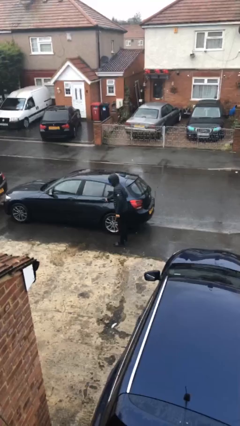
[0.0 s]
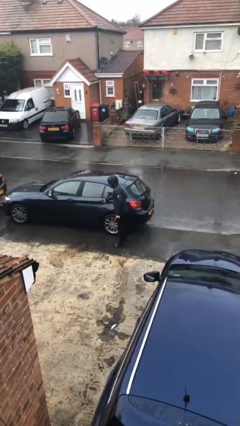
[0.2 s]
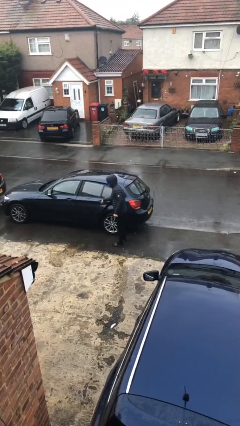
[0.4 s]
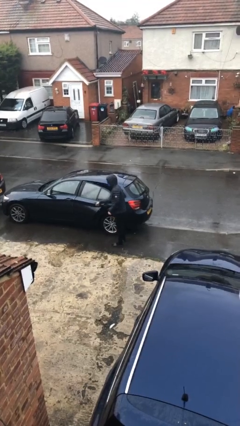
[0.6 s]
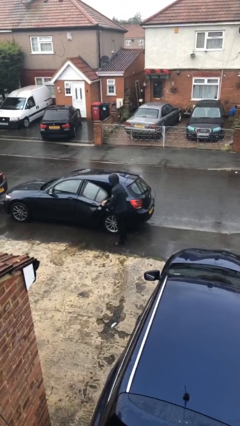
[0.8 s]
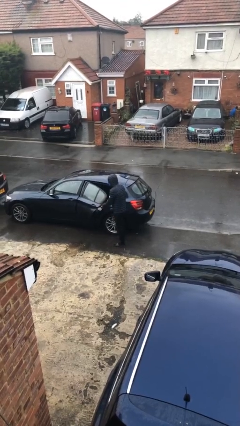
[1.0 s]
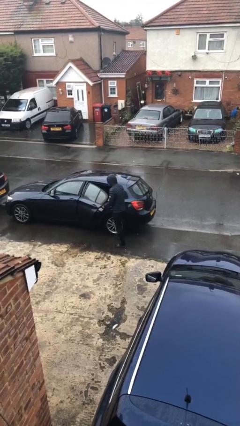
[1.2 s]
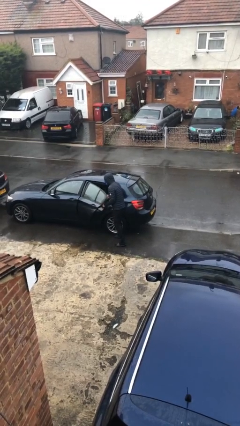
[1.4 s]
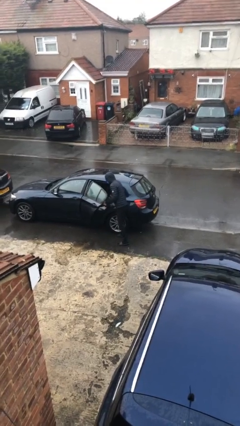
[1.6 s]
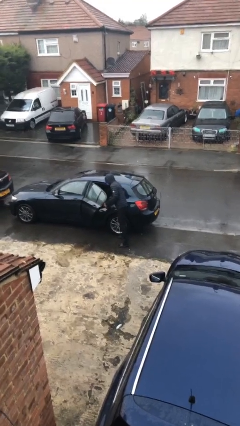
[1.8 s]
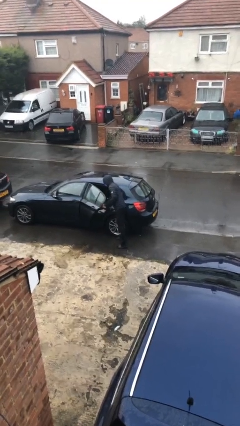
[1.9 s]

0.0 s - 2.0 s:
person opens car door

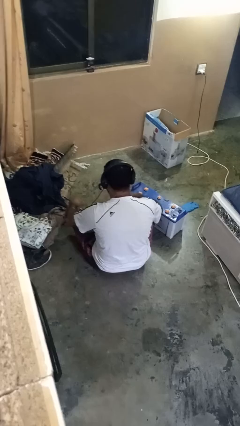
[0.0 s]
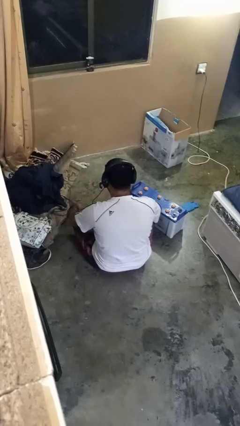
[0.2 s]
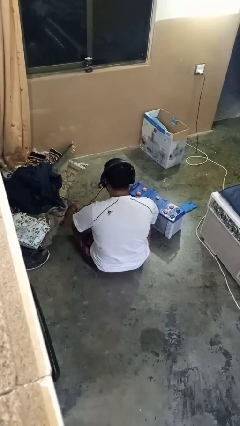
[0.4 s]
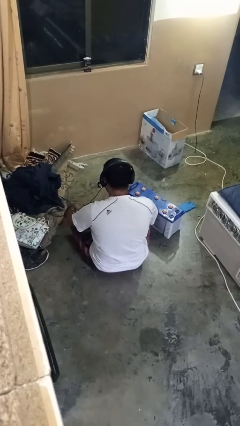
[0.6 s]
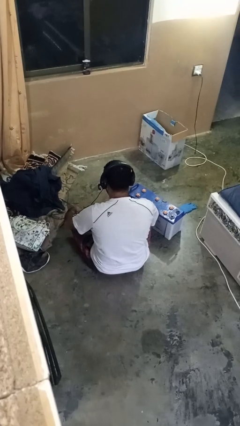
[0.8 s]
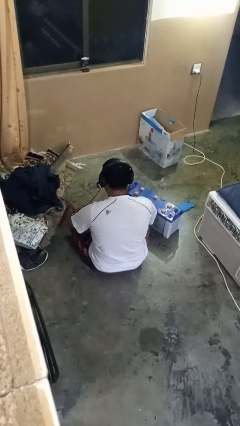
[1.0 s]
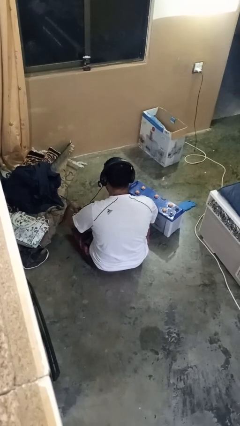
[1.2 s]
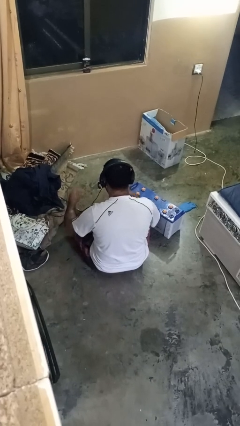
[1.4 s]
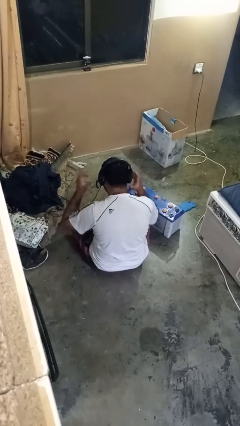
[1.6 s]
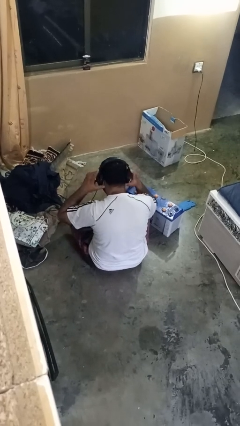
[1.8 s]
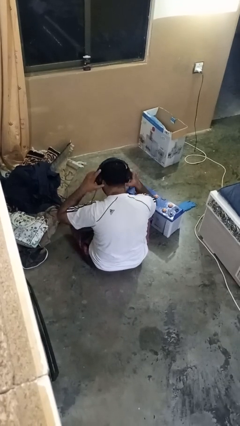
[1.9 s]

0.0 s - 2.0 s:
person takes off headphones

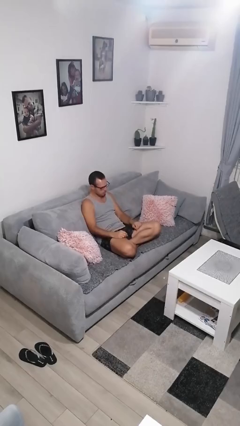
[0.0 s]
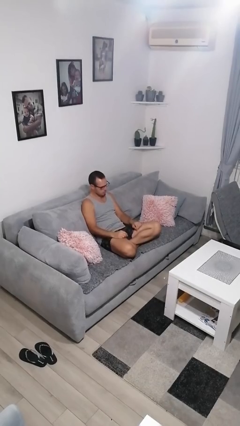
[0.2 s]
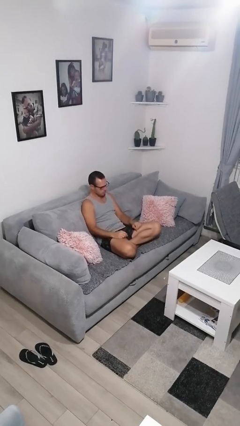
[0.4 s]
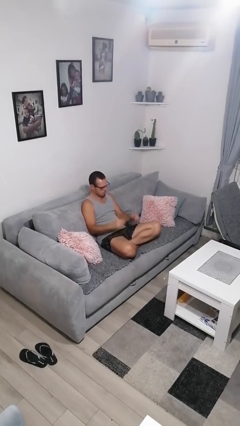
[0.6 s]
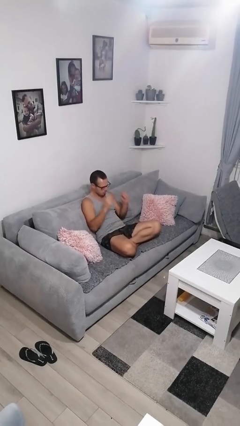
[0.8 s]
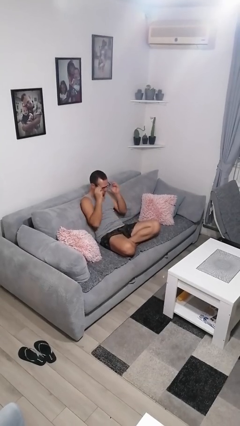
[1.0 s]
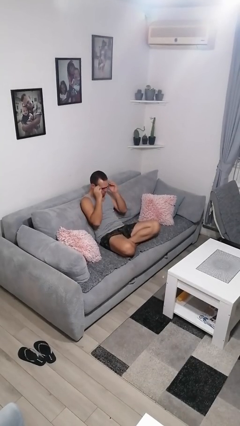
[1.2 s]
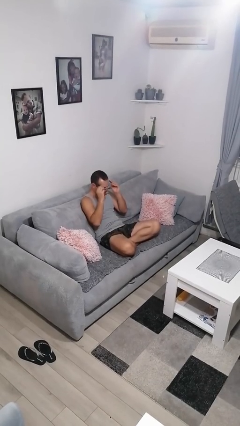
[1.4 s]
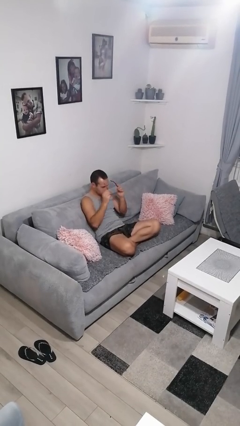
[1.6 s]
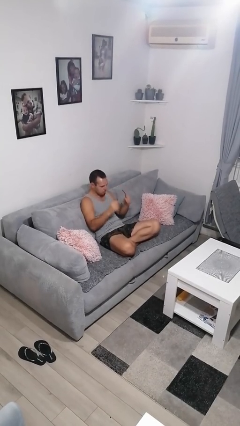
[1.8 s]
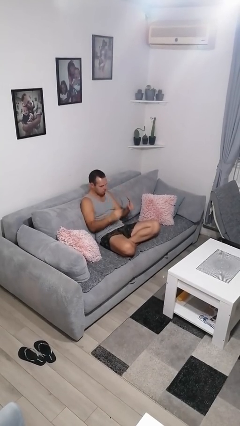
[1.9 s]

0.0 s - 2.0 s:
person takes off glasses

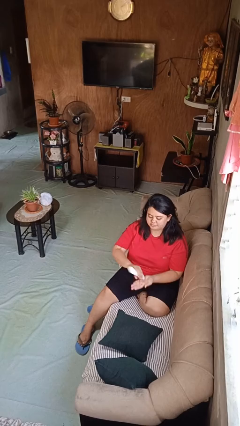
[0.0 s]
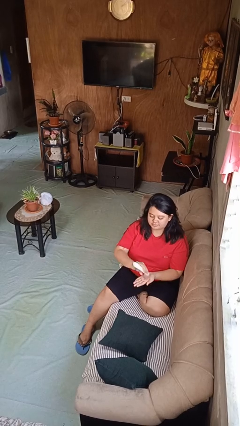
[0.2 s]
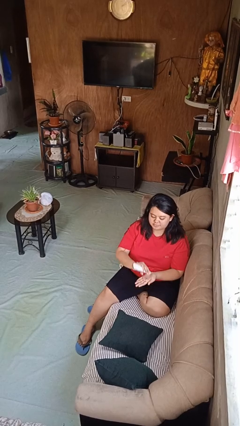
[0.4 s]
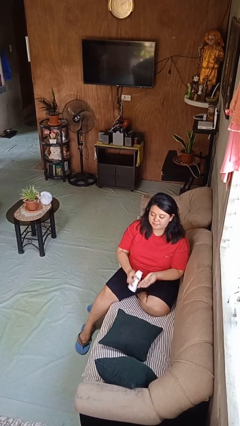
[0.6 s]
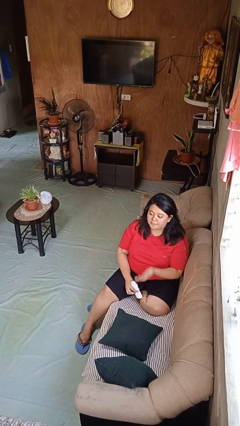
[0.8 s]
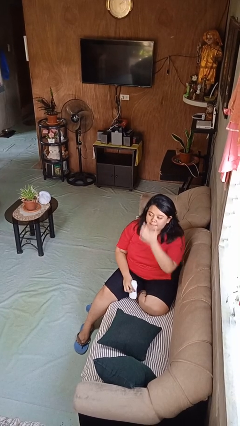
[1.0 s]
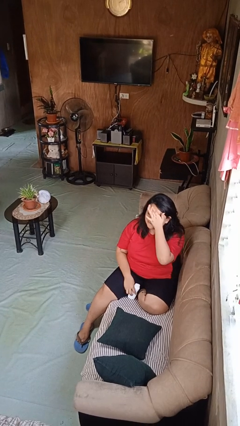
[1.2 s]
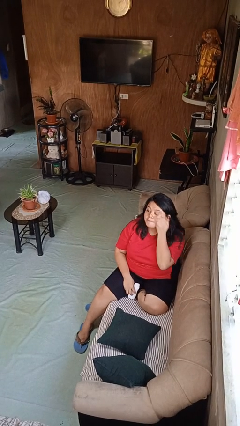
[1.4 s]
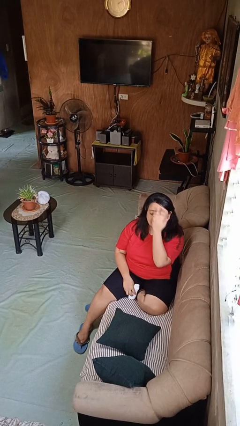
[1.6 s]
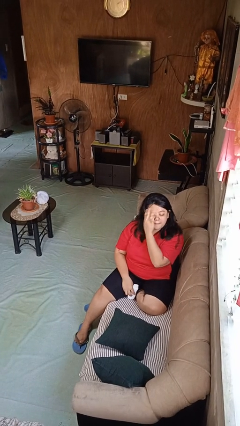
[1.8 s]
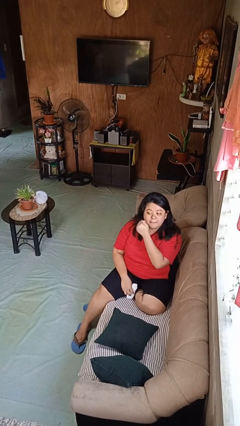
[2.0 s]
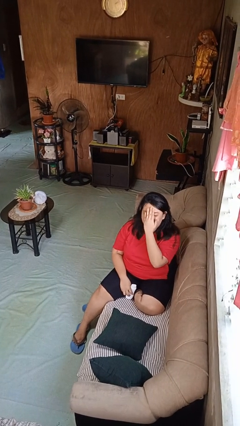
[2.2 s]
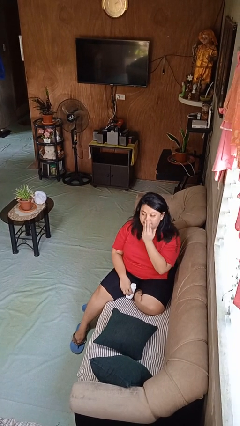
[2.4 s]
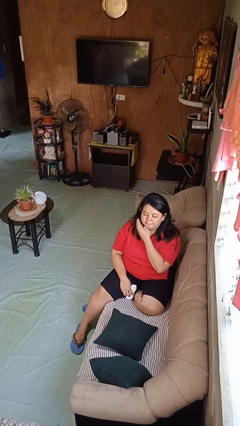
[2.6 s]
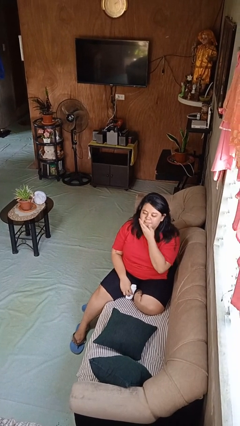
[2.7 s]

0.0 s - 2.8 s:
person applies facial moisturizer

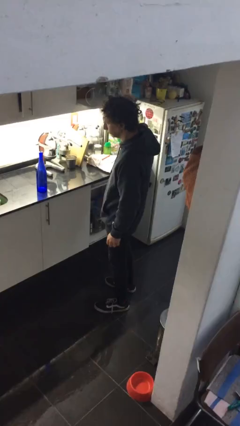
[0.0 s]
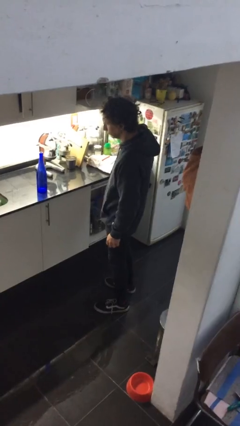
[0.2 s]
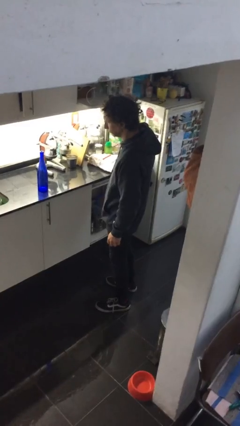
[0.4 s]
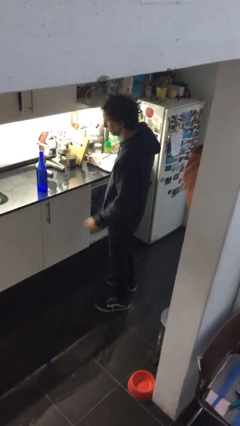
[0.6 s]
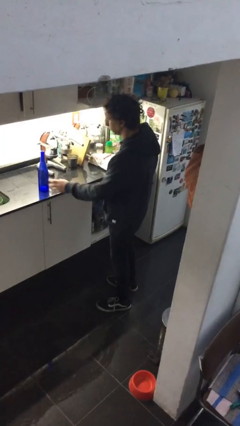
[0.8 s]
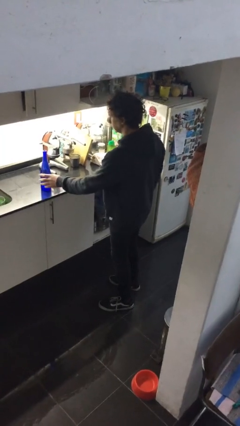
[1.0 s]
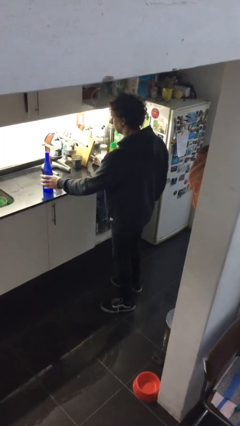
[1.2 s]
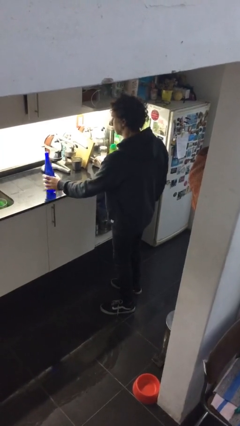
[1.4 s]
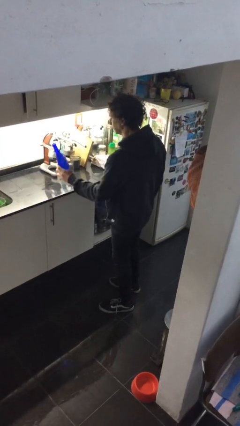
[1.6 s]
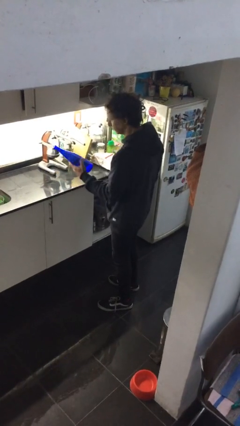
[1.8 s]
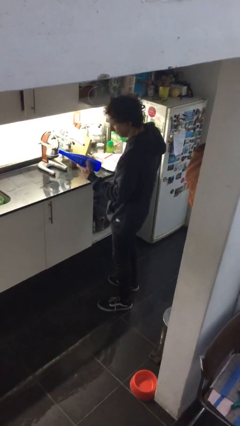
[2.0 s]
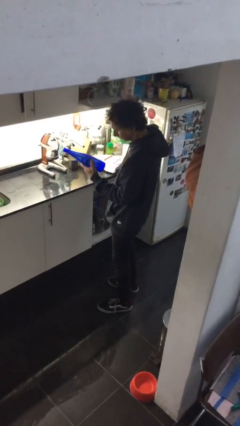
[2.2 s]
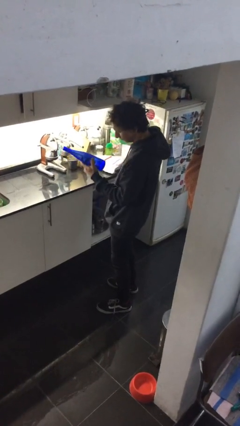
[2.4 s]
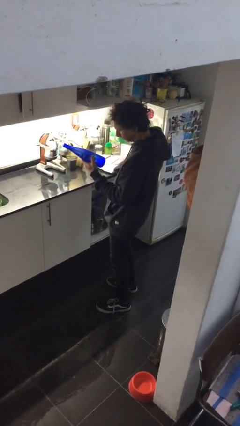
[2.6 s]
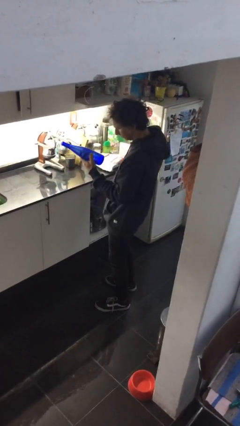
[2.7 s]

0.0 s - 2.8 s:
person picks up object from countertop

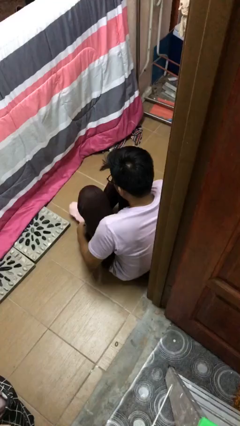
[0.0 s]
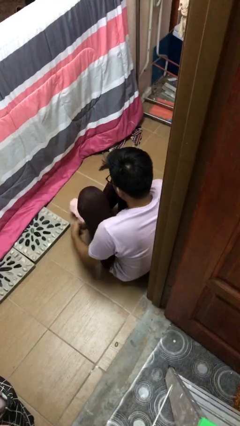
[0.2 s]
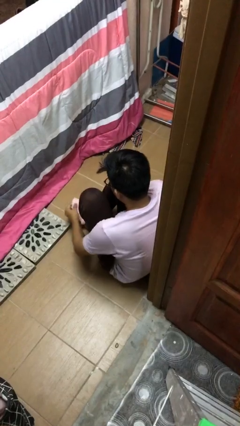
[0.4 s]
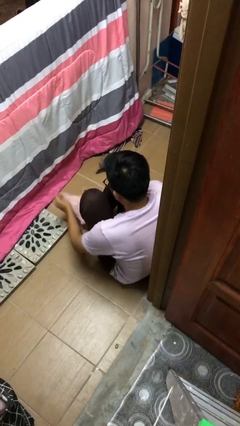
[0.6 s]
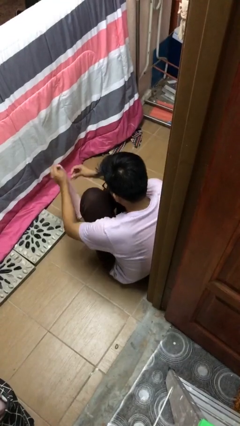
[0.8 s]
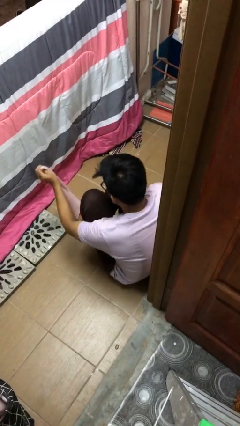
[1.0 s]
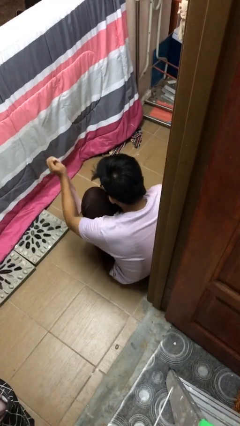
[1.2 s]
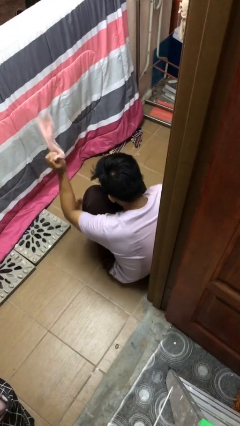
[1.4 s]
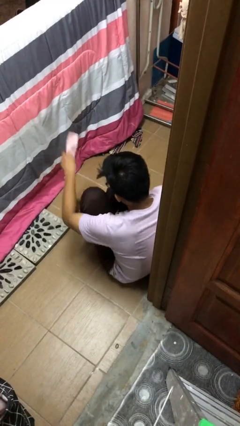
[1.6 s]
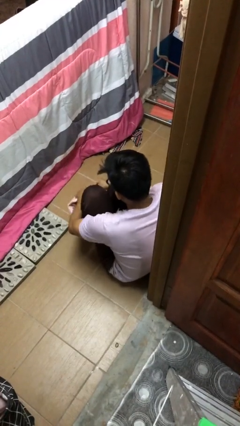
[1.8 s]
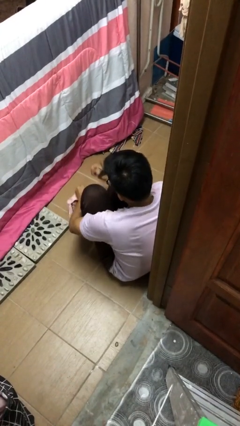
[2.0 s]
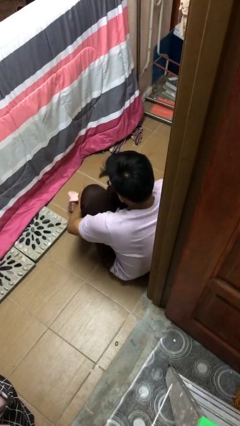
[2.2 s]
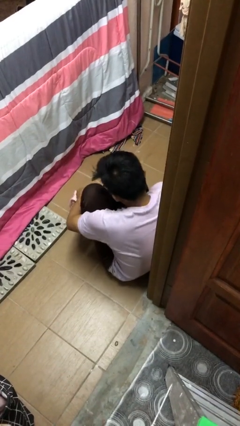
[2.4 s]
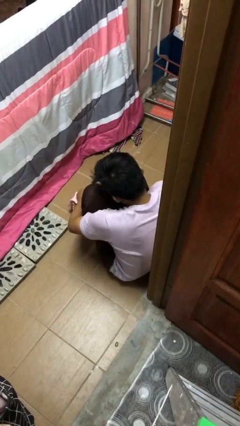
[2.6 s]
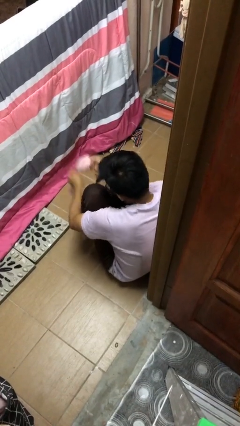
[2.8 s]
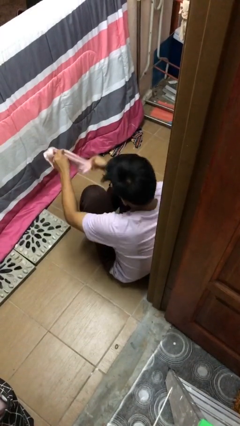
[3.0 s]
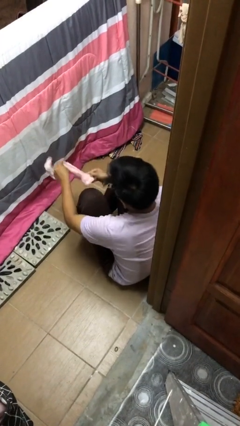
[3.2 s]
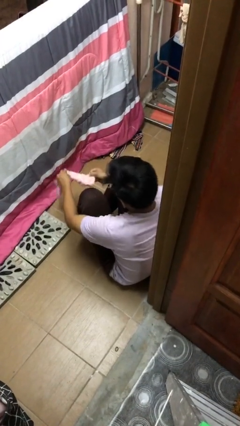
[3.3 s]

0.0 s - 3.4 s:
person takes off socks

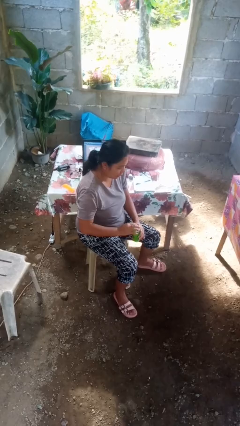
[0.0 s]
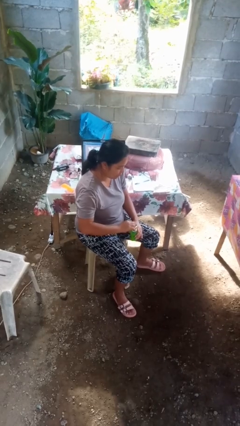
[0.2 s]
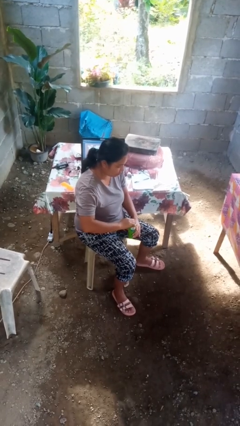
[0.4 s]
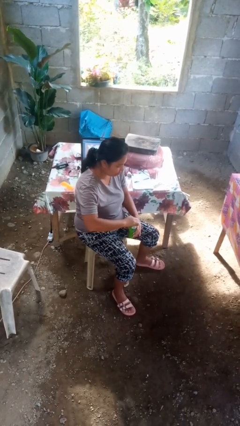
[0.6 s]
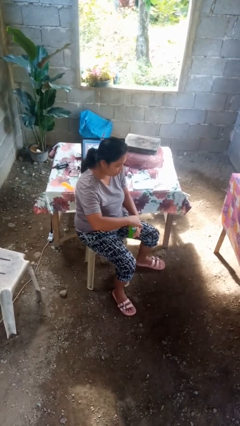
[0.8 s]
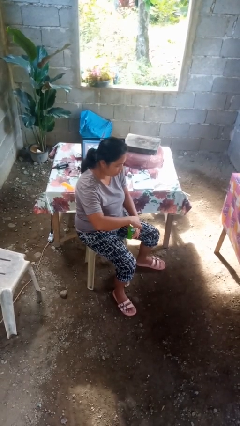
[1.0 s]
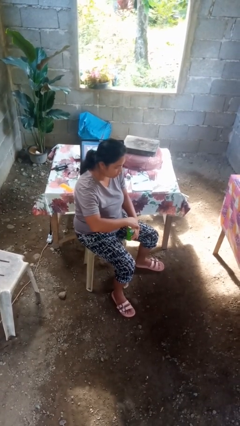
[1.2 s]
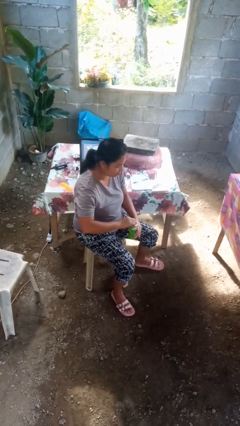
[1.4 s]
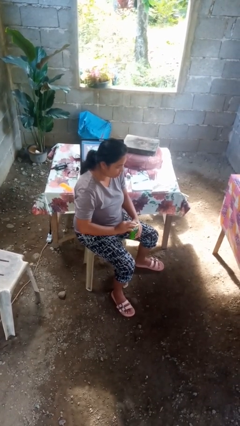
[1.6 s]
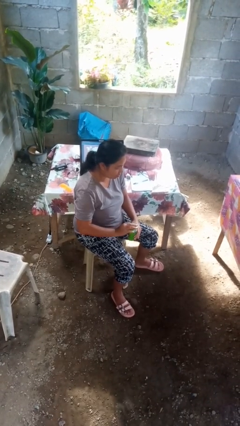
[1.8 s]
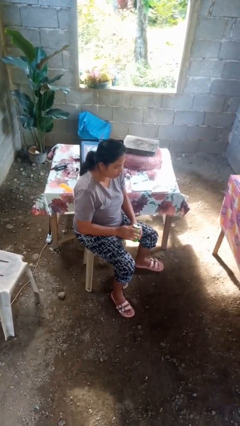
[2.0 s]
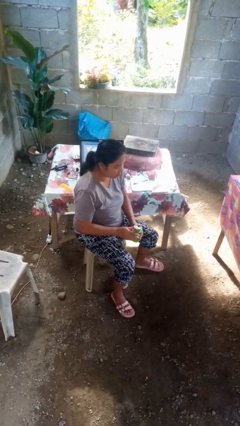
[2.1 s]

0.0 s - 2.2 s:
person opens beverage can

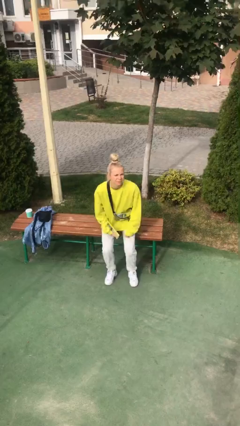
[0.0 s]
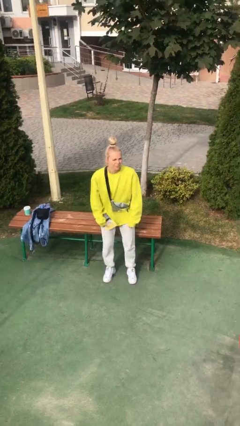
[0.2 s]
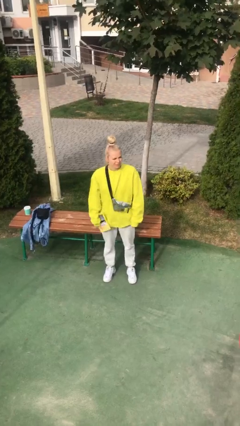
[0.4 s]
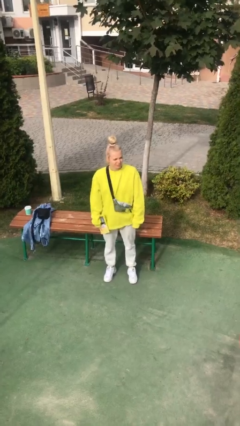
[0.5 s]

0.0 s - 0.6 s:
person stands up
